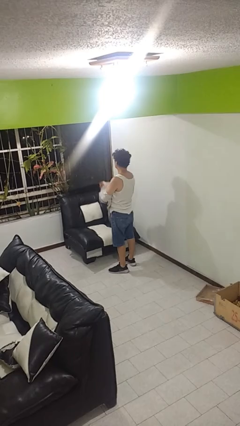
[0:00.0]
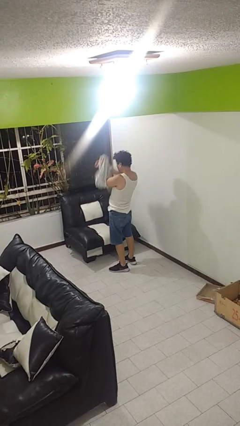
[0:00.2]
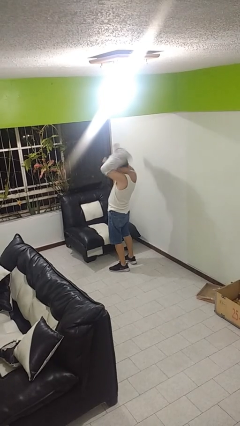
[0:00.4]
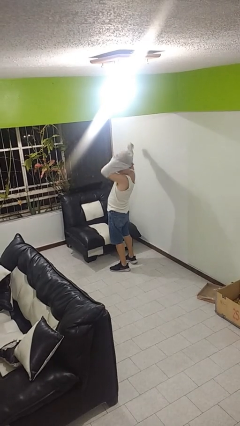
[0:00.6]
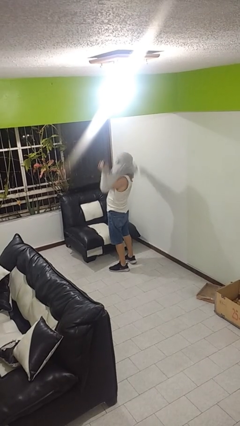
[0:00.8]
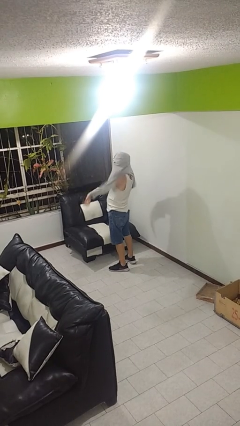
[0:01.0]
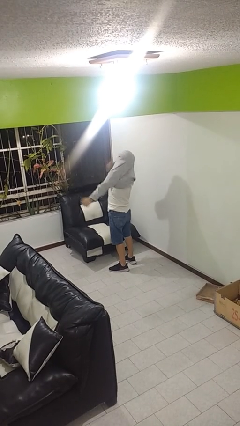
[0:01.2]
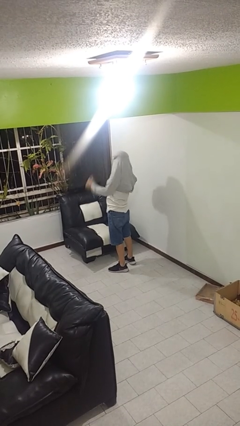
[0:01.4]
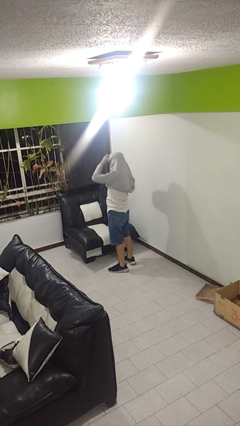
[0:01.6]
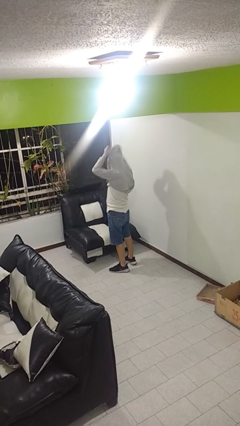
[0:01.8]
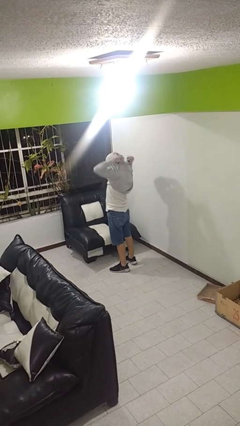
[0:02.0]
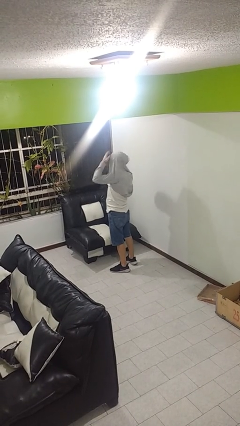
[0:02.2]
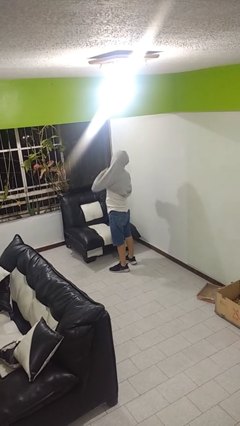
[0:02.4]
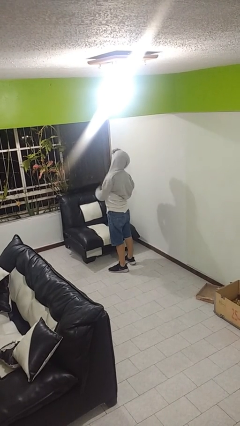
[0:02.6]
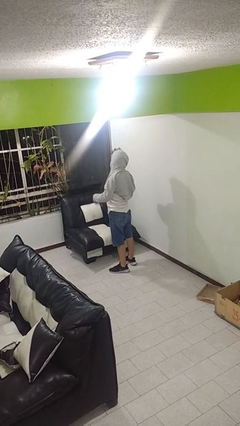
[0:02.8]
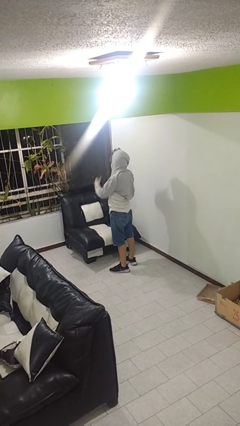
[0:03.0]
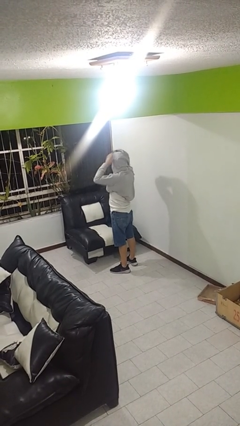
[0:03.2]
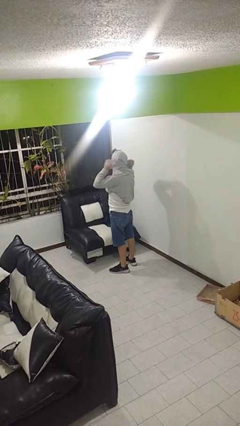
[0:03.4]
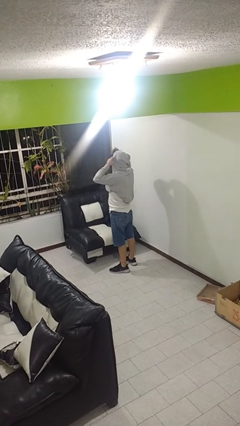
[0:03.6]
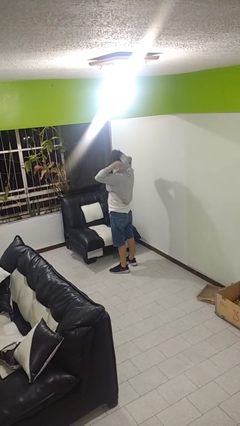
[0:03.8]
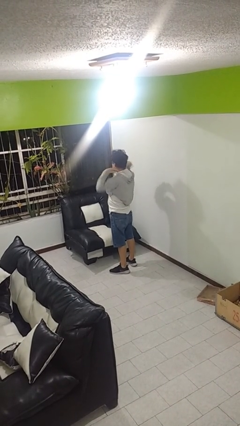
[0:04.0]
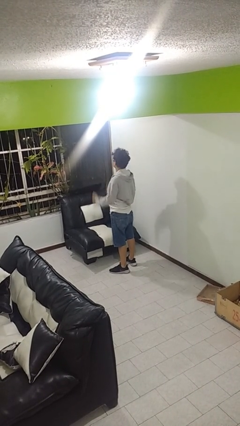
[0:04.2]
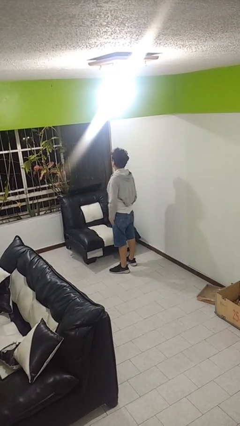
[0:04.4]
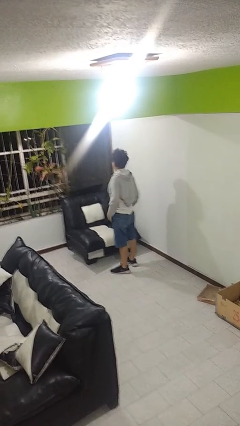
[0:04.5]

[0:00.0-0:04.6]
person puts on hoodie

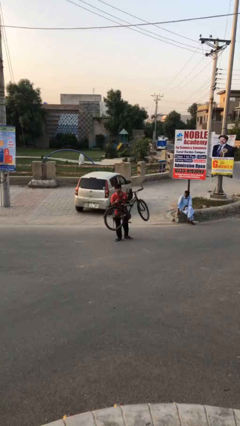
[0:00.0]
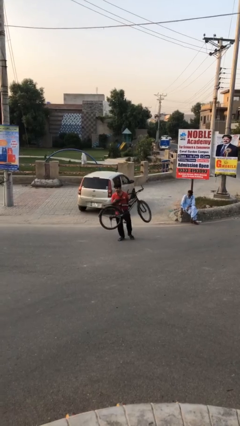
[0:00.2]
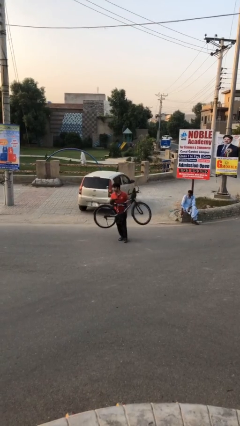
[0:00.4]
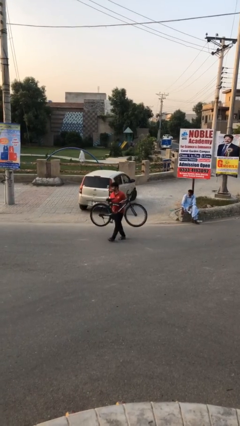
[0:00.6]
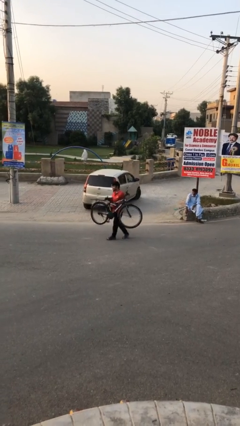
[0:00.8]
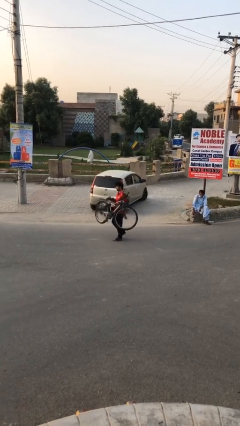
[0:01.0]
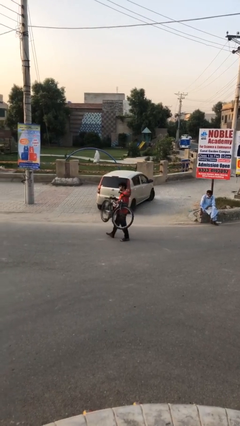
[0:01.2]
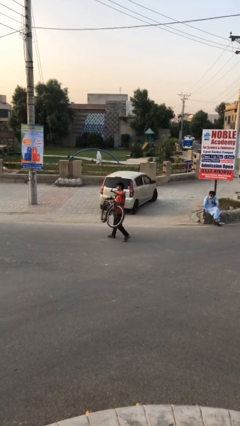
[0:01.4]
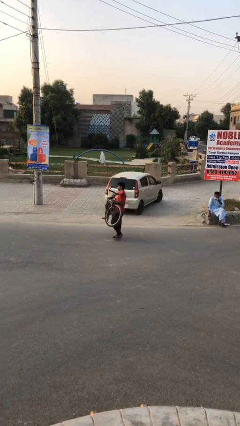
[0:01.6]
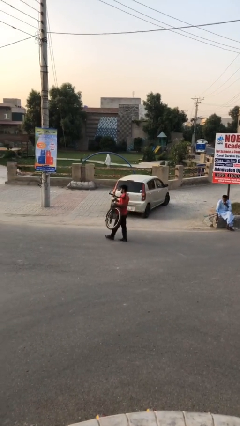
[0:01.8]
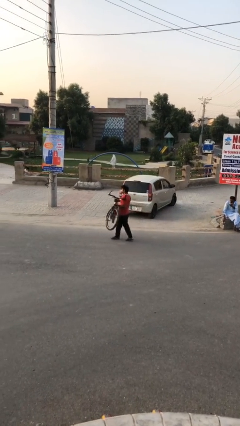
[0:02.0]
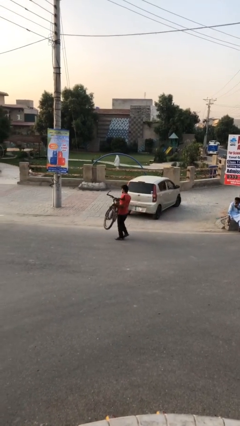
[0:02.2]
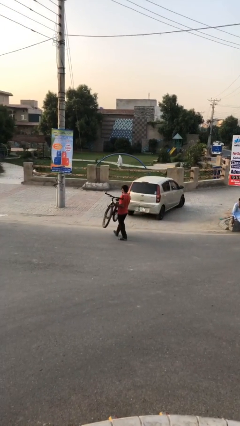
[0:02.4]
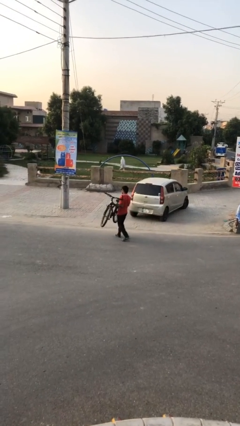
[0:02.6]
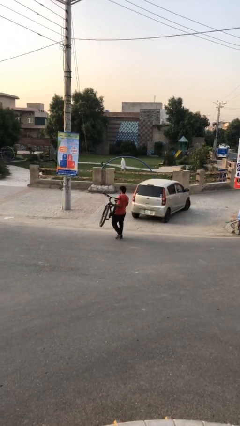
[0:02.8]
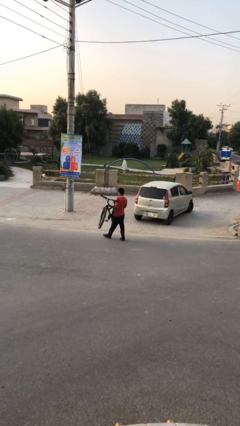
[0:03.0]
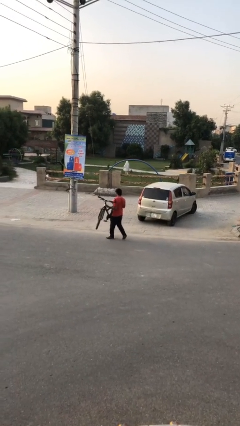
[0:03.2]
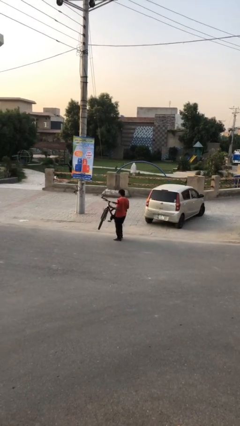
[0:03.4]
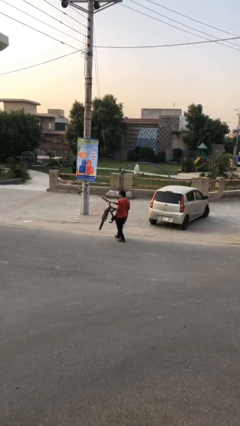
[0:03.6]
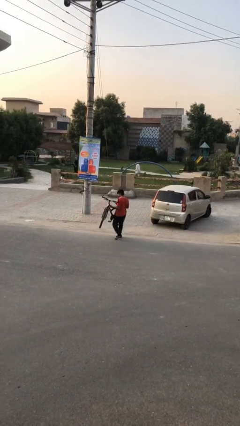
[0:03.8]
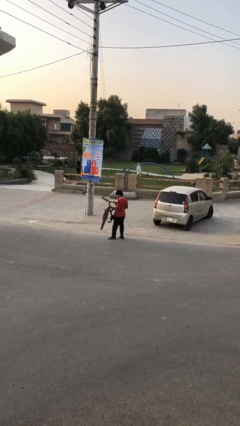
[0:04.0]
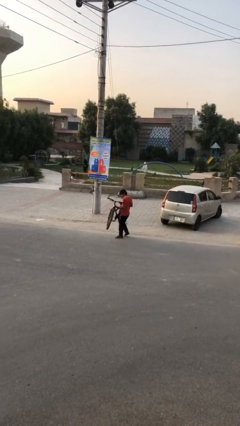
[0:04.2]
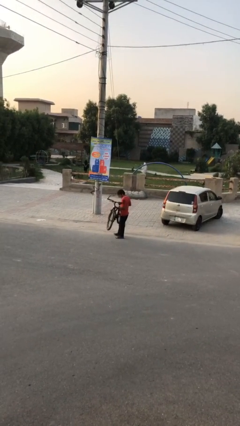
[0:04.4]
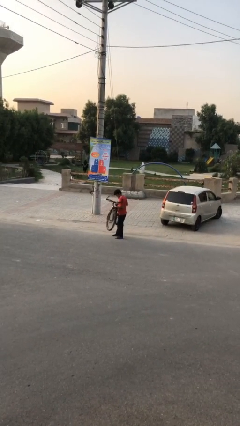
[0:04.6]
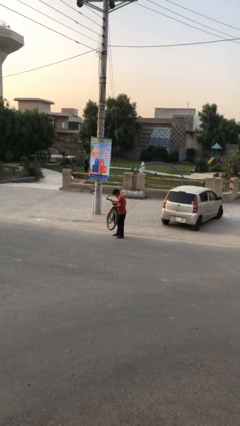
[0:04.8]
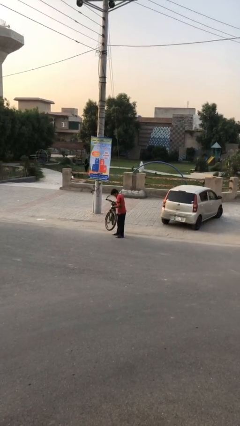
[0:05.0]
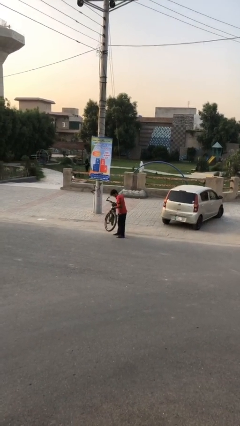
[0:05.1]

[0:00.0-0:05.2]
person carries heavy object

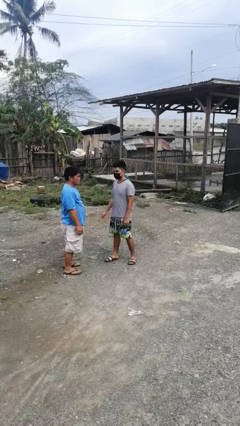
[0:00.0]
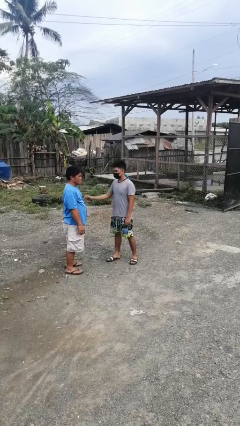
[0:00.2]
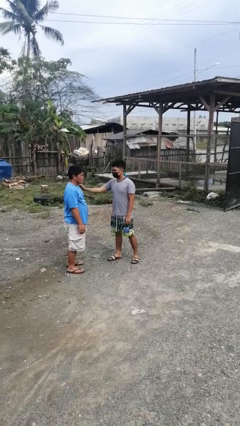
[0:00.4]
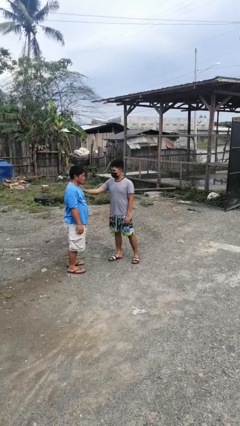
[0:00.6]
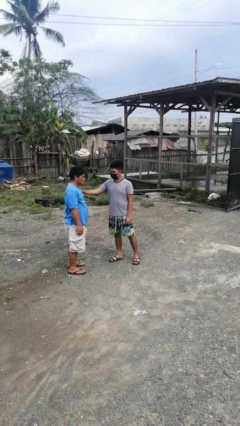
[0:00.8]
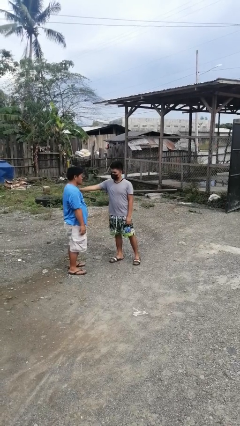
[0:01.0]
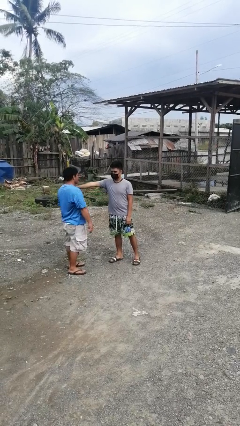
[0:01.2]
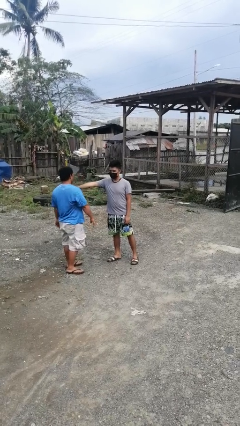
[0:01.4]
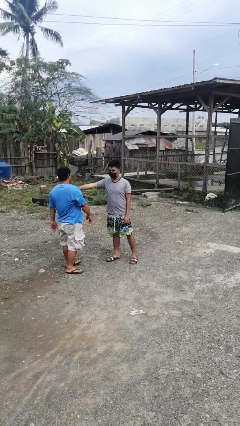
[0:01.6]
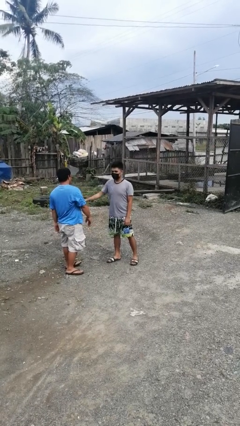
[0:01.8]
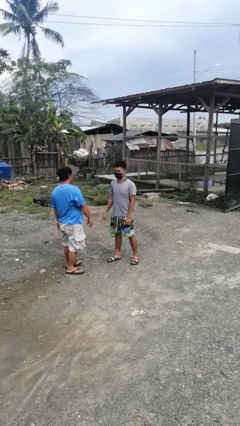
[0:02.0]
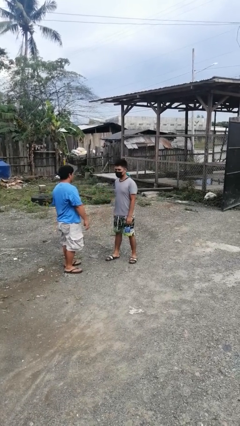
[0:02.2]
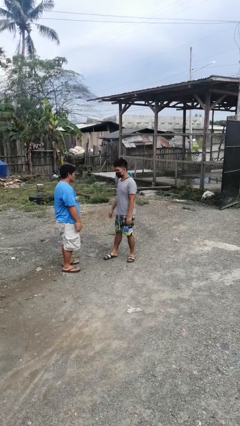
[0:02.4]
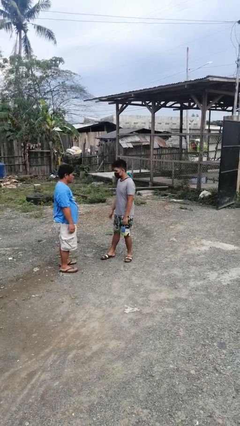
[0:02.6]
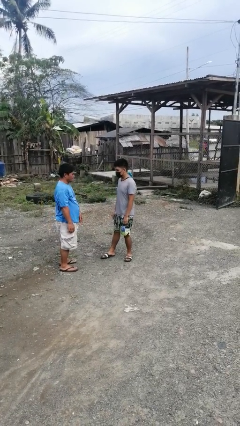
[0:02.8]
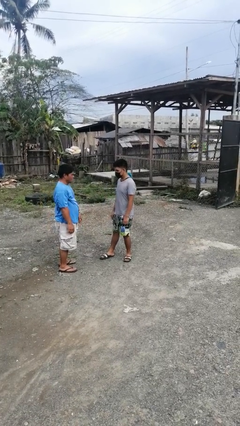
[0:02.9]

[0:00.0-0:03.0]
person shoves person

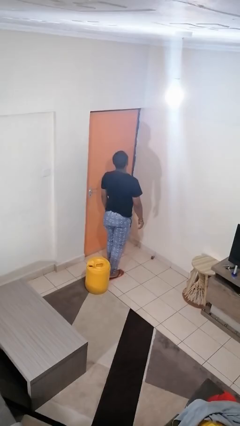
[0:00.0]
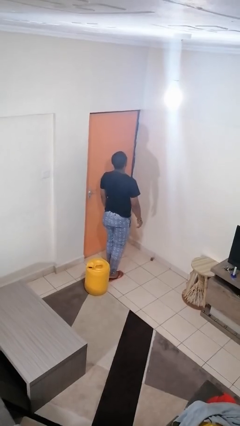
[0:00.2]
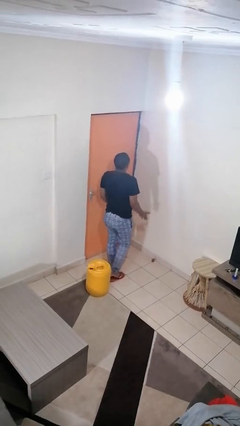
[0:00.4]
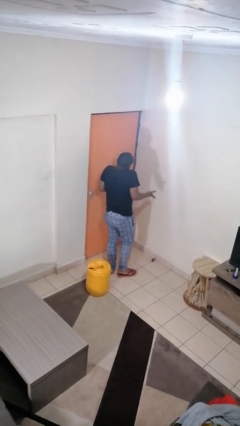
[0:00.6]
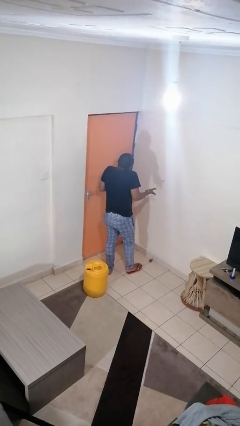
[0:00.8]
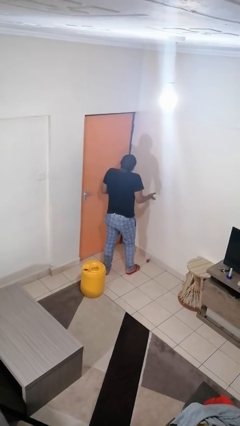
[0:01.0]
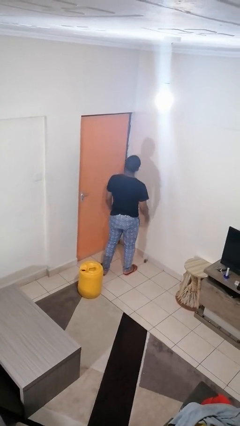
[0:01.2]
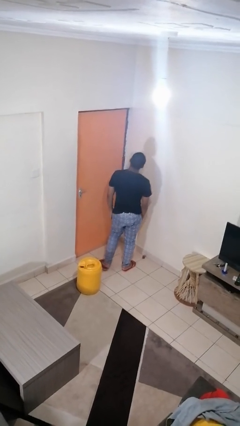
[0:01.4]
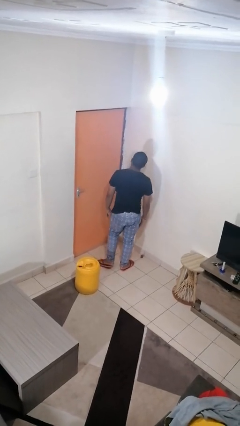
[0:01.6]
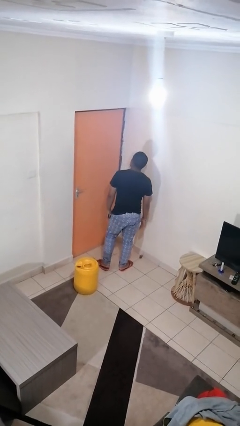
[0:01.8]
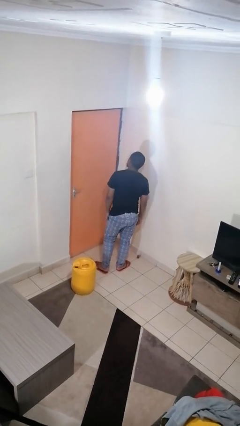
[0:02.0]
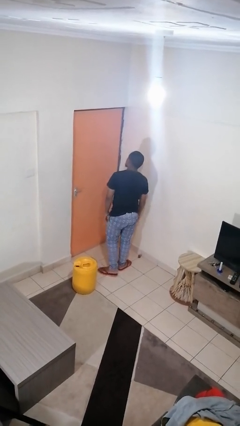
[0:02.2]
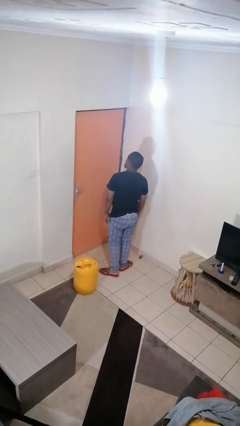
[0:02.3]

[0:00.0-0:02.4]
person shrugs

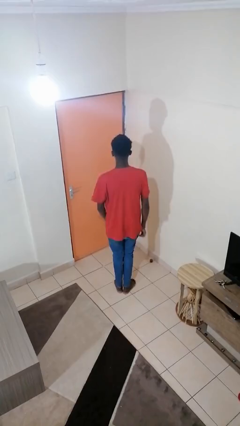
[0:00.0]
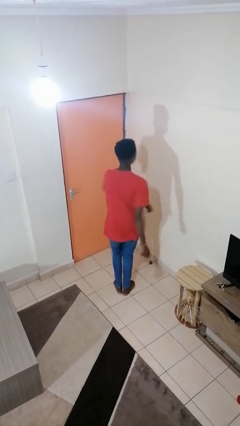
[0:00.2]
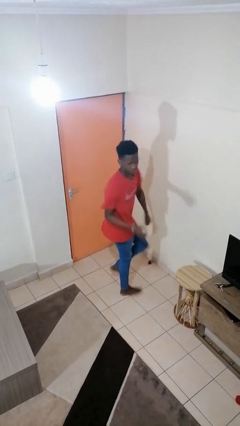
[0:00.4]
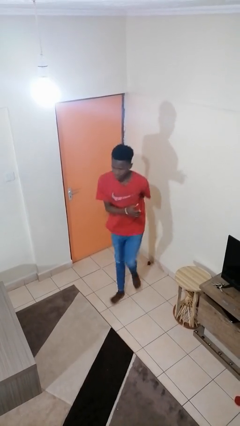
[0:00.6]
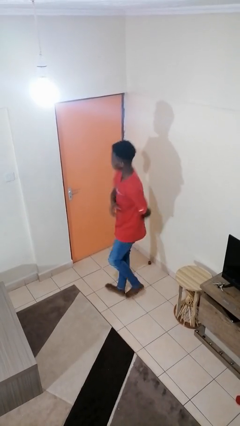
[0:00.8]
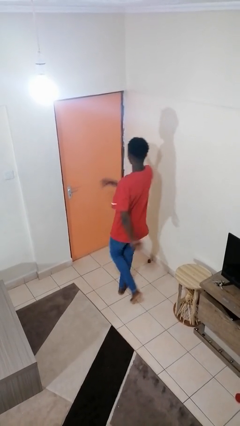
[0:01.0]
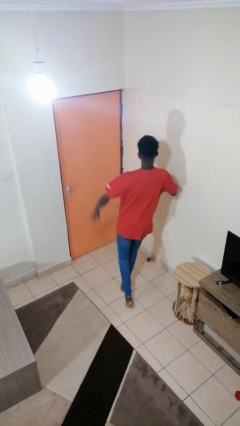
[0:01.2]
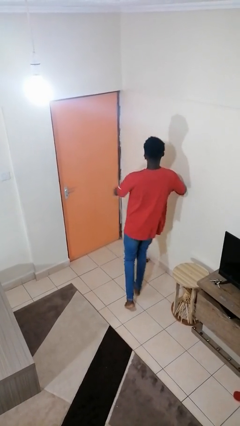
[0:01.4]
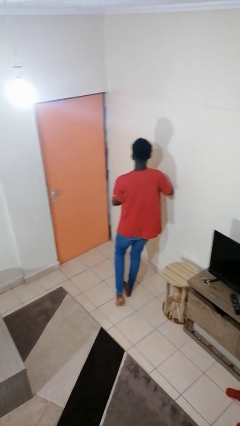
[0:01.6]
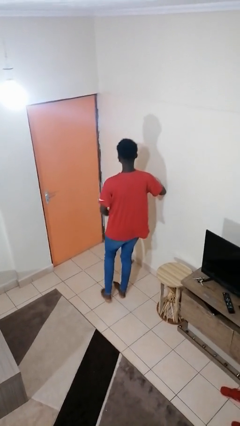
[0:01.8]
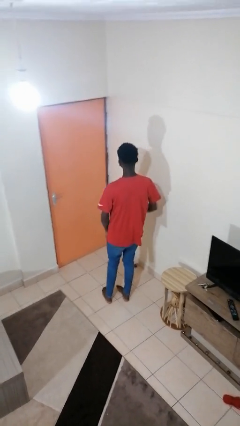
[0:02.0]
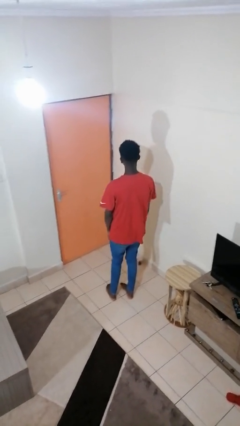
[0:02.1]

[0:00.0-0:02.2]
person twirls
